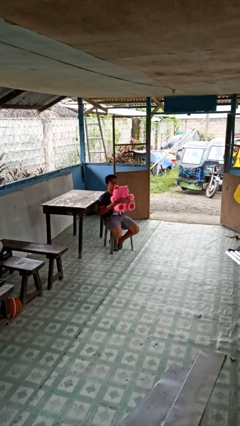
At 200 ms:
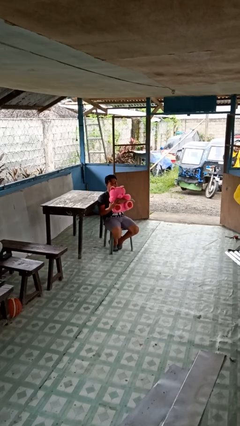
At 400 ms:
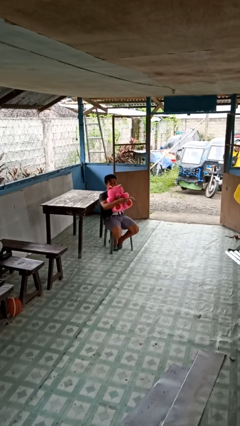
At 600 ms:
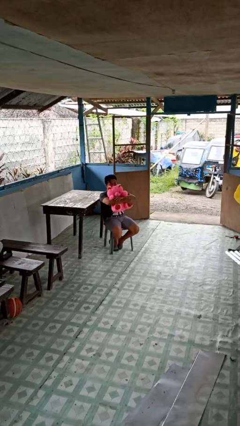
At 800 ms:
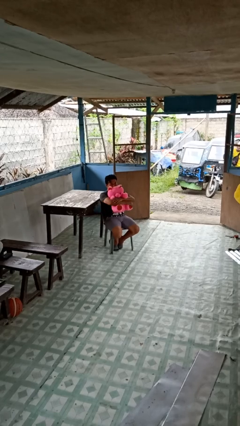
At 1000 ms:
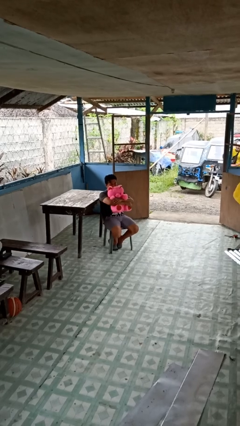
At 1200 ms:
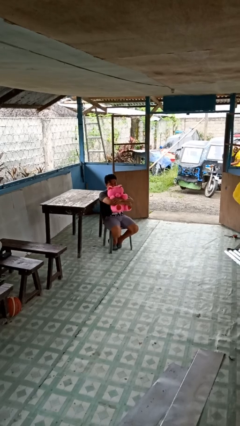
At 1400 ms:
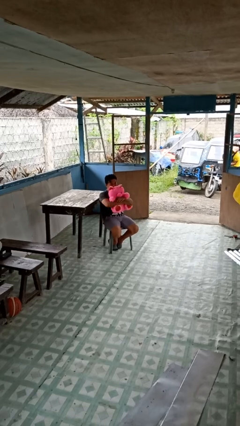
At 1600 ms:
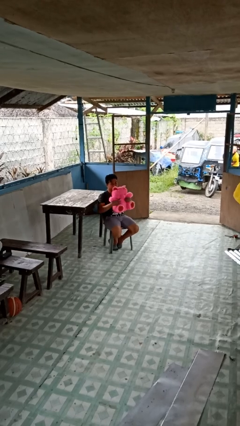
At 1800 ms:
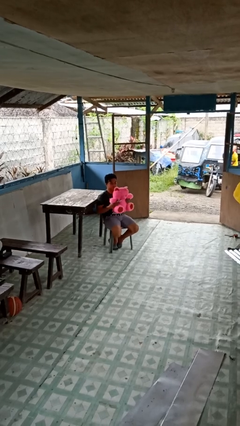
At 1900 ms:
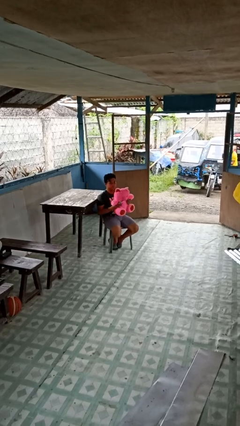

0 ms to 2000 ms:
person hugs stuffed animal

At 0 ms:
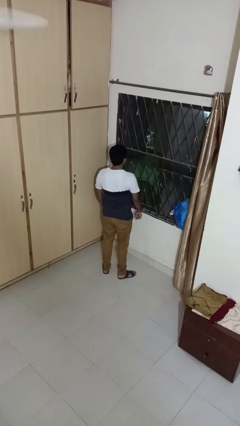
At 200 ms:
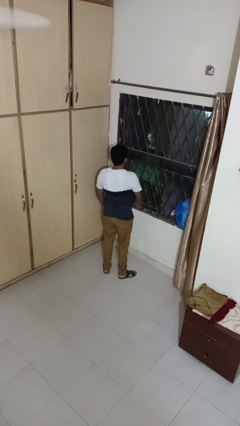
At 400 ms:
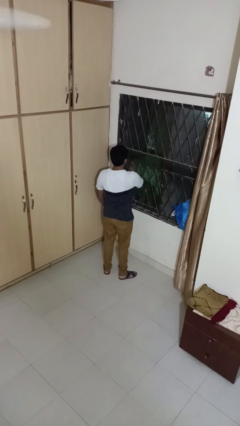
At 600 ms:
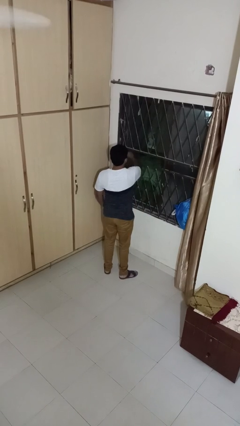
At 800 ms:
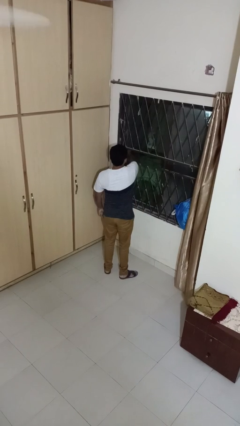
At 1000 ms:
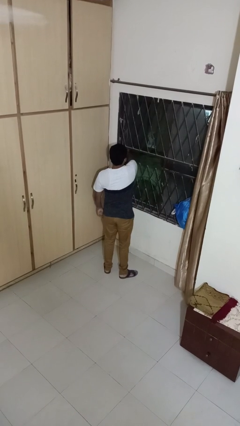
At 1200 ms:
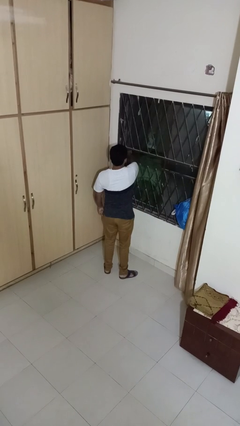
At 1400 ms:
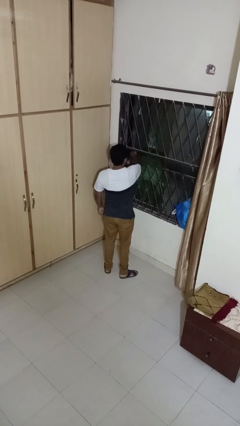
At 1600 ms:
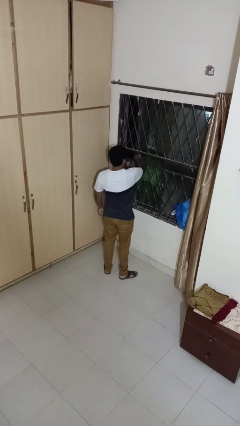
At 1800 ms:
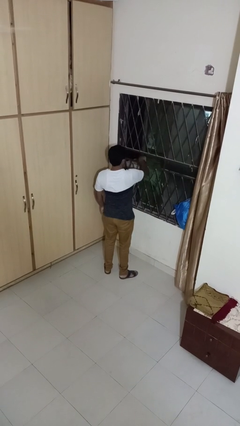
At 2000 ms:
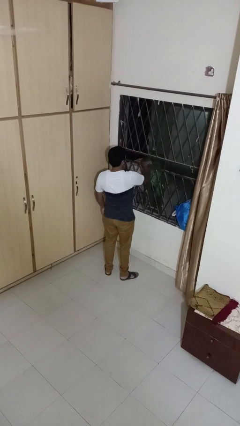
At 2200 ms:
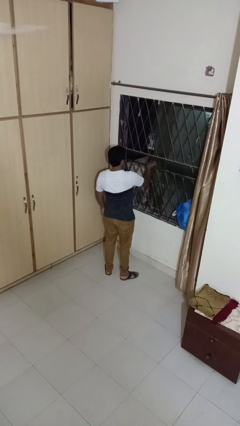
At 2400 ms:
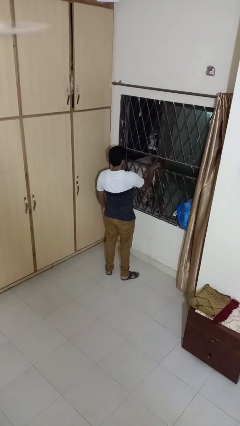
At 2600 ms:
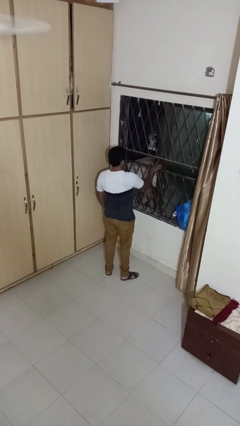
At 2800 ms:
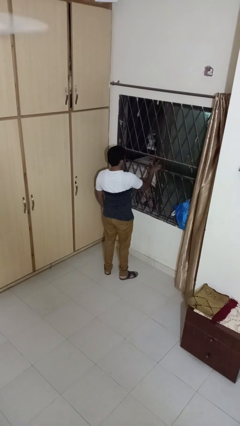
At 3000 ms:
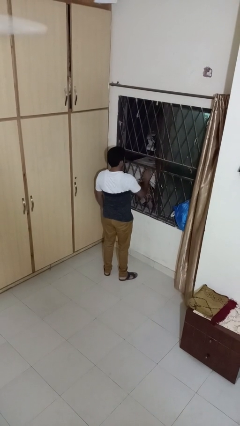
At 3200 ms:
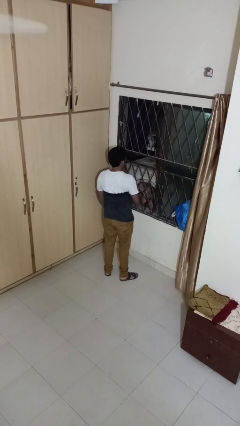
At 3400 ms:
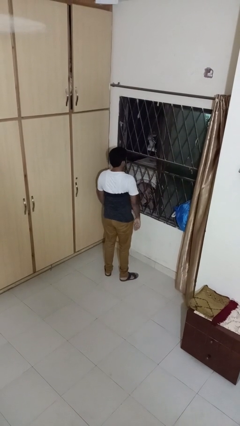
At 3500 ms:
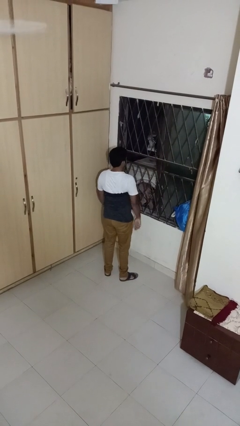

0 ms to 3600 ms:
person opens home window

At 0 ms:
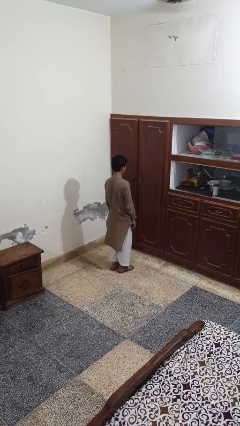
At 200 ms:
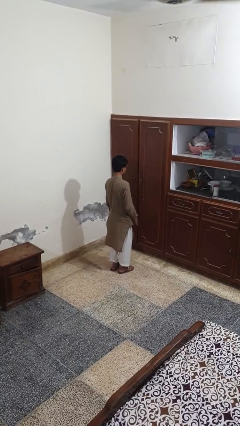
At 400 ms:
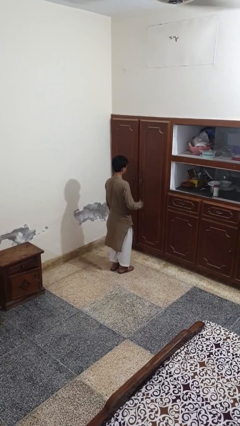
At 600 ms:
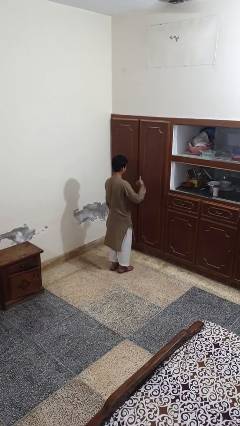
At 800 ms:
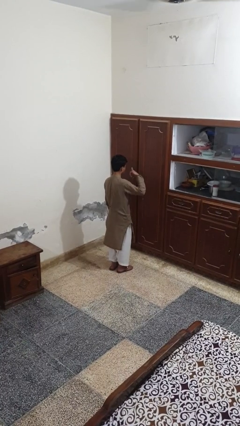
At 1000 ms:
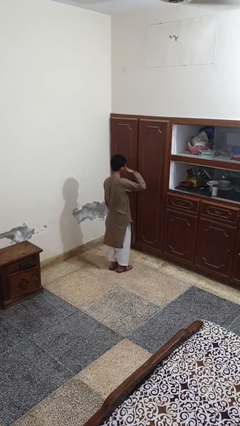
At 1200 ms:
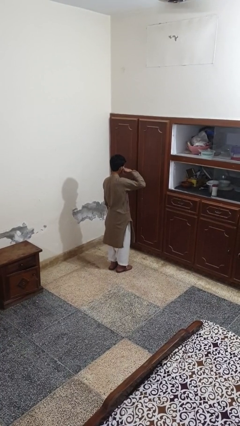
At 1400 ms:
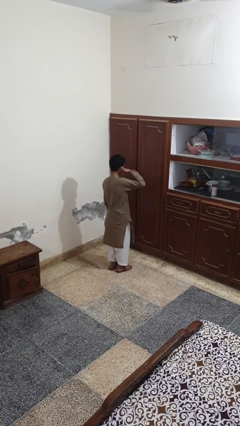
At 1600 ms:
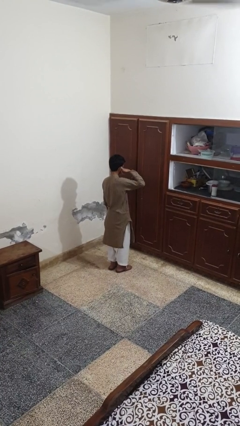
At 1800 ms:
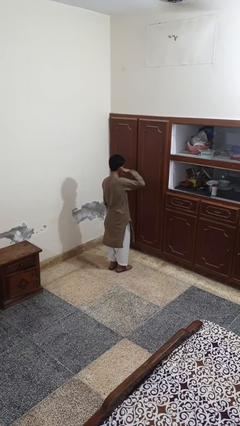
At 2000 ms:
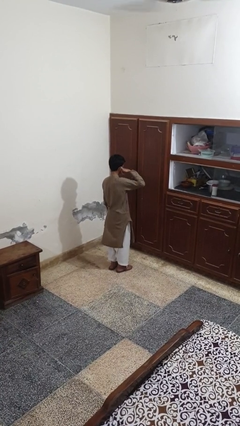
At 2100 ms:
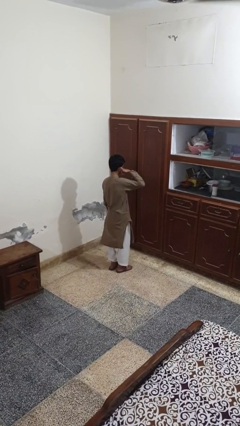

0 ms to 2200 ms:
person gestures call me

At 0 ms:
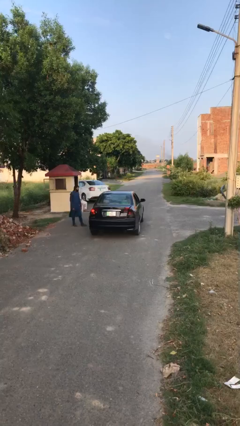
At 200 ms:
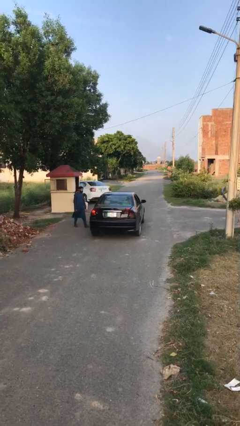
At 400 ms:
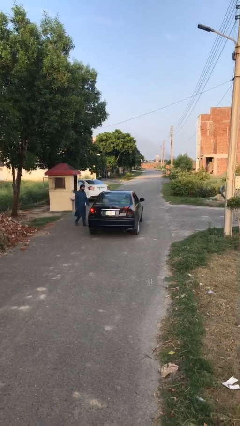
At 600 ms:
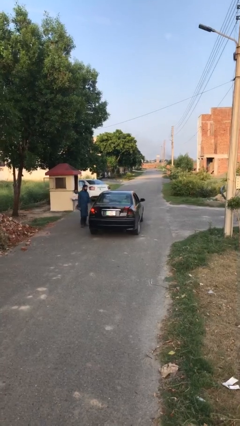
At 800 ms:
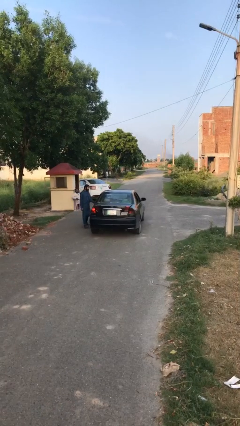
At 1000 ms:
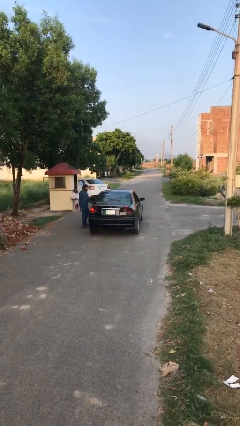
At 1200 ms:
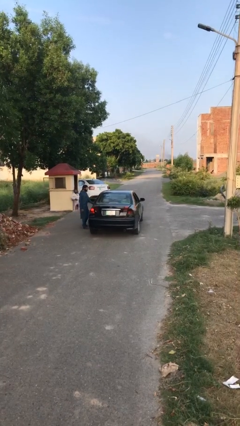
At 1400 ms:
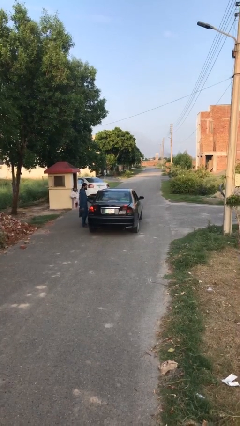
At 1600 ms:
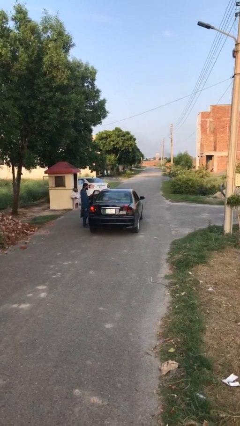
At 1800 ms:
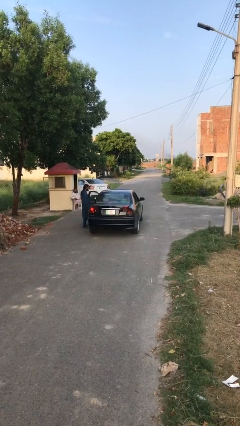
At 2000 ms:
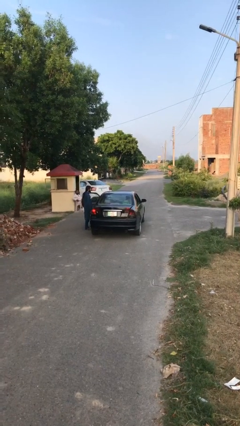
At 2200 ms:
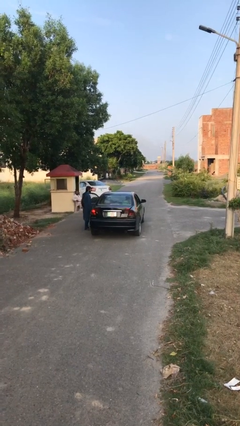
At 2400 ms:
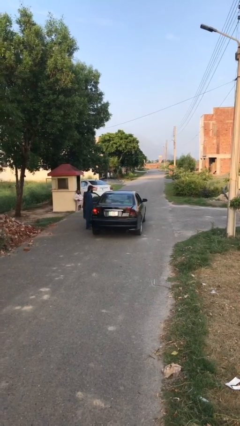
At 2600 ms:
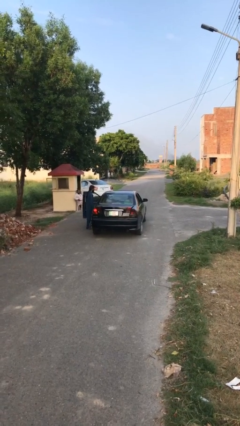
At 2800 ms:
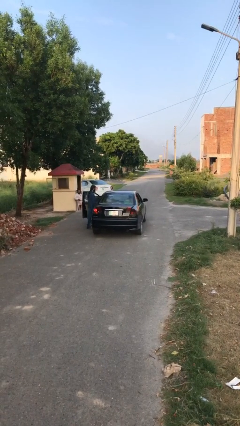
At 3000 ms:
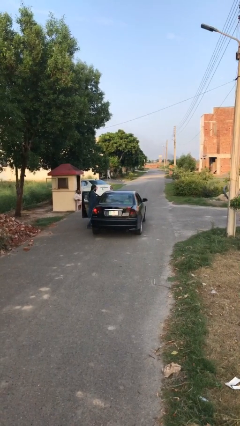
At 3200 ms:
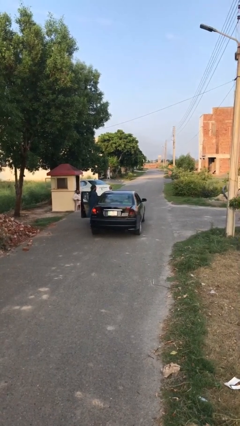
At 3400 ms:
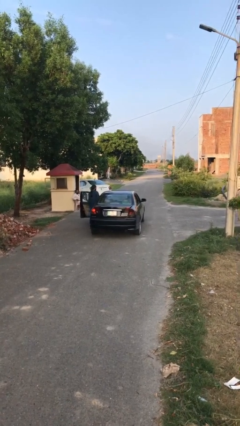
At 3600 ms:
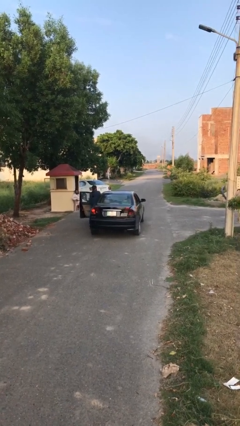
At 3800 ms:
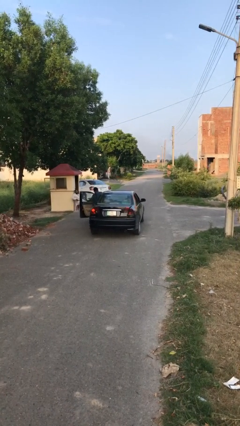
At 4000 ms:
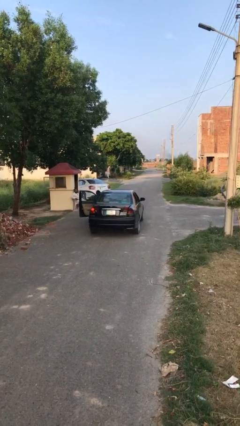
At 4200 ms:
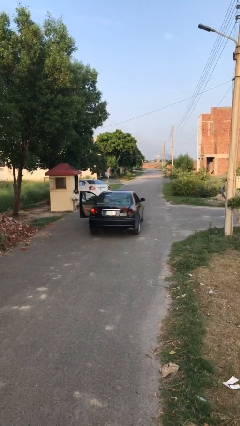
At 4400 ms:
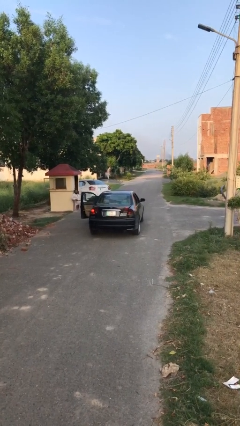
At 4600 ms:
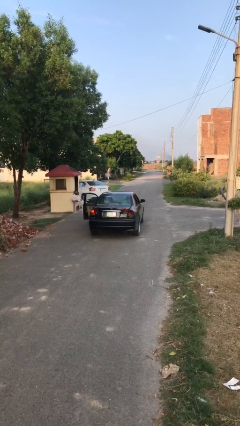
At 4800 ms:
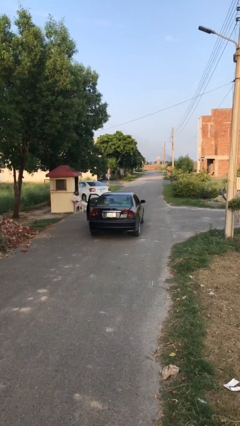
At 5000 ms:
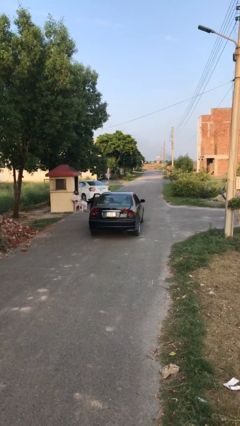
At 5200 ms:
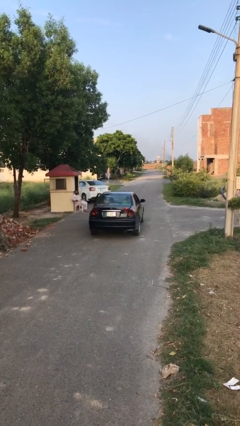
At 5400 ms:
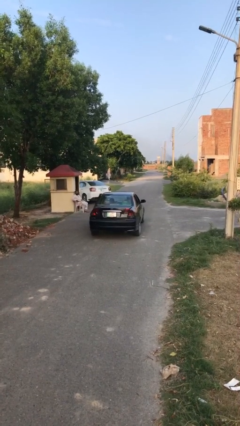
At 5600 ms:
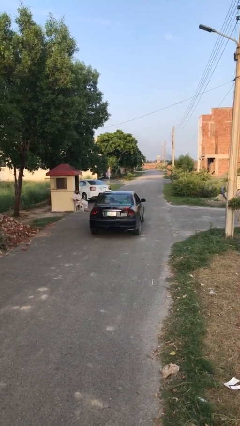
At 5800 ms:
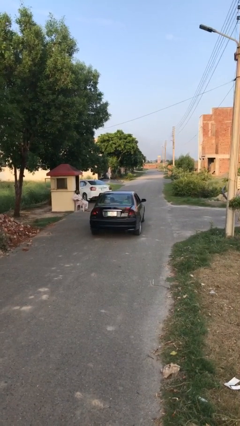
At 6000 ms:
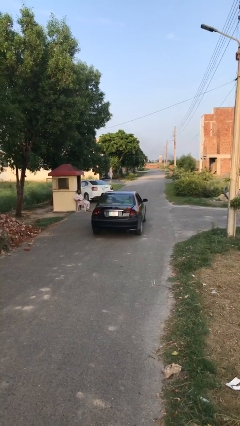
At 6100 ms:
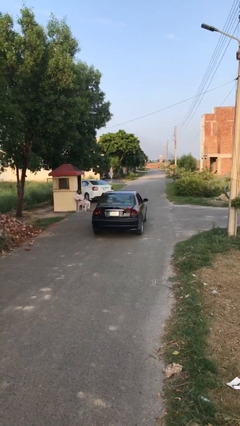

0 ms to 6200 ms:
car picks up person

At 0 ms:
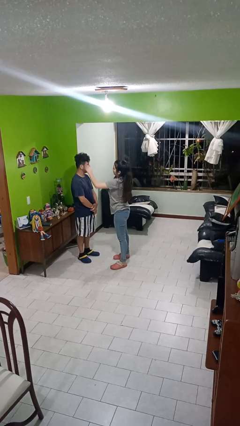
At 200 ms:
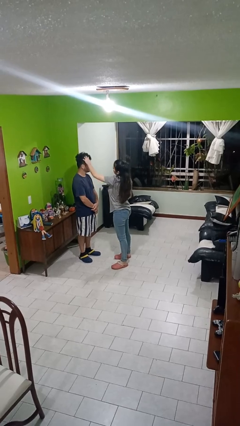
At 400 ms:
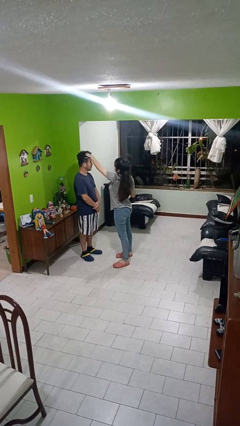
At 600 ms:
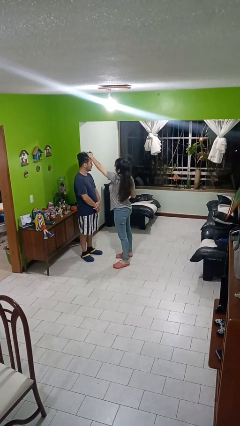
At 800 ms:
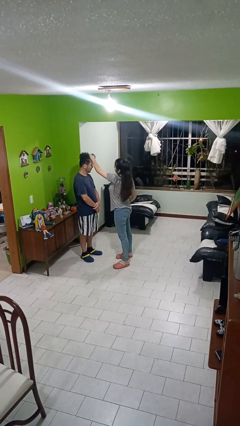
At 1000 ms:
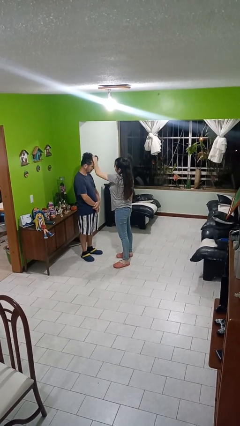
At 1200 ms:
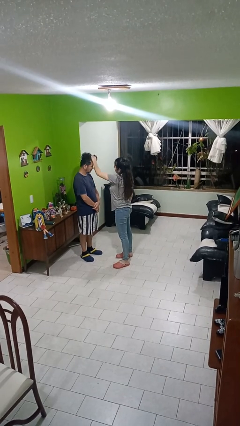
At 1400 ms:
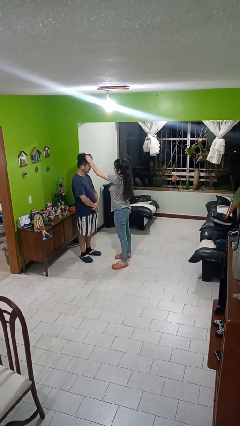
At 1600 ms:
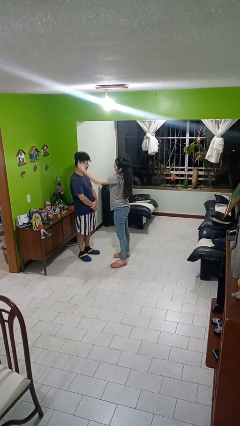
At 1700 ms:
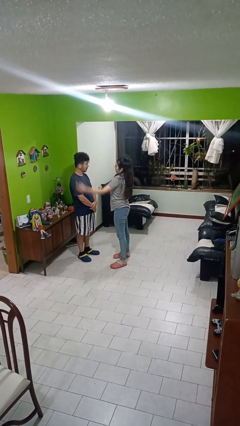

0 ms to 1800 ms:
person grabs person by hair

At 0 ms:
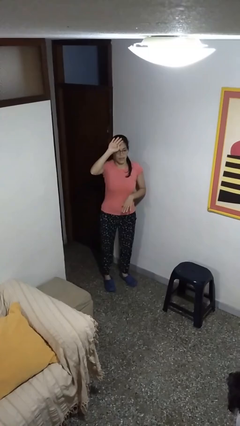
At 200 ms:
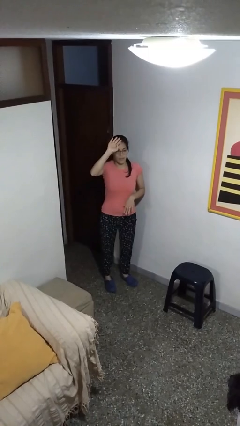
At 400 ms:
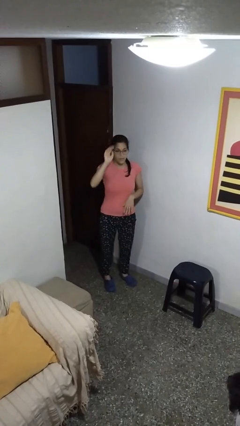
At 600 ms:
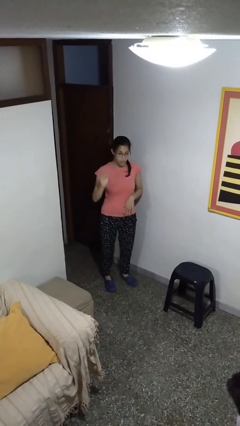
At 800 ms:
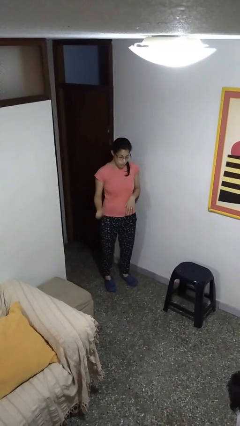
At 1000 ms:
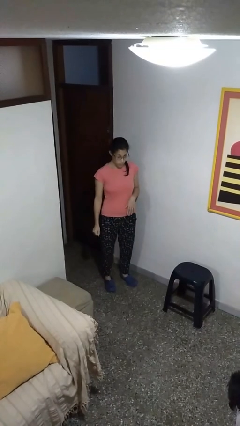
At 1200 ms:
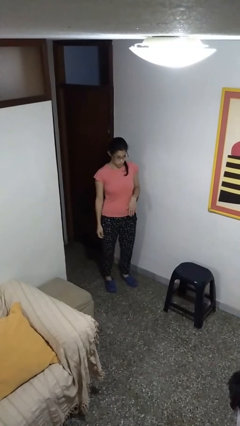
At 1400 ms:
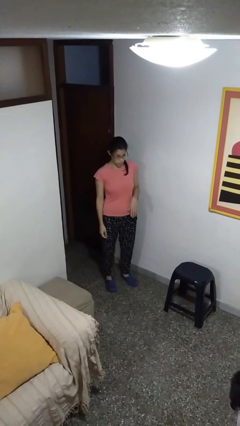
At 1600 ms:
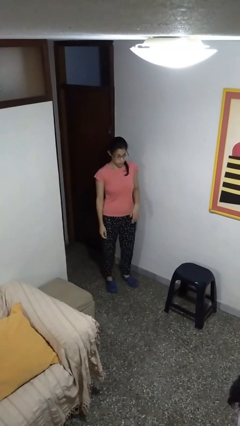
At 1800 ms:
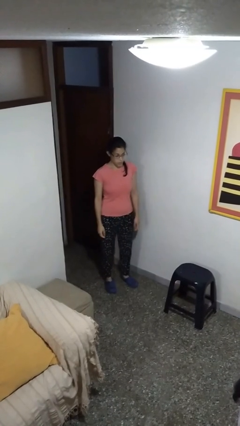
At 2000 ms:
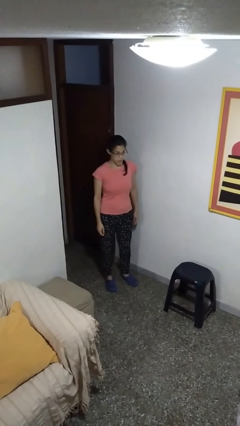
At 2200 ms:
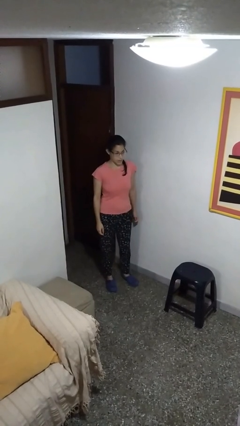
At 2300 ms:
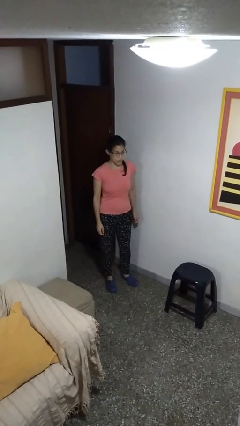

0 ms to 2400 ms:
person gestures lower hand
